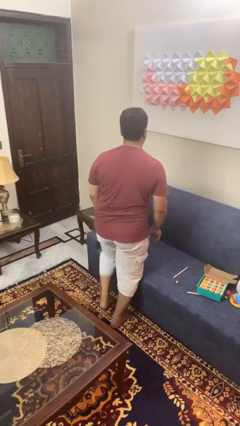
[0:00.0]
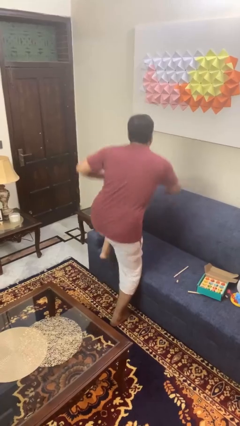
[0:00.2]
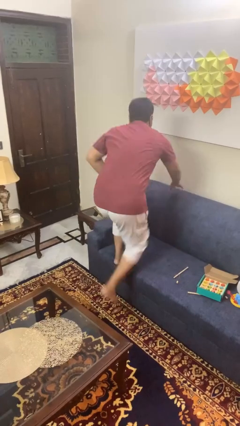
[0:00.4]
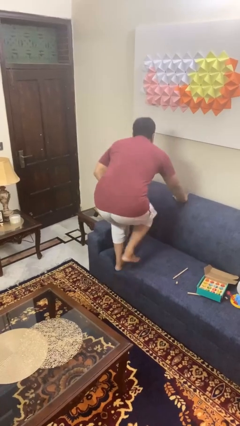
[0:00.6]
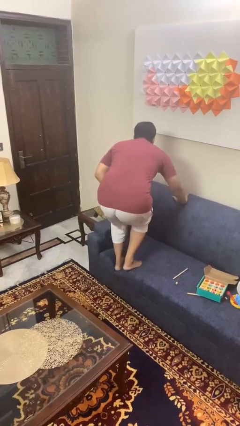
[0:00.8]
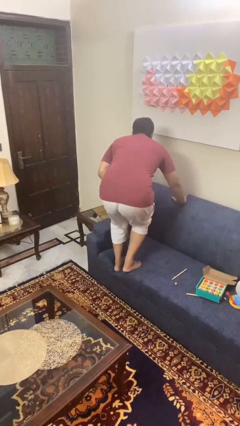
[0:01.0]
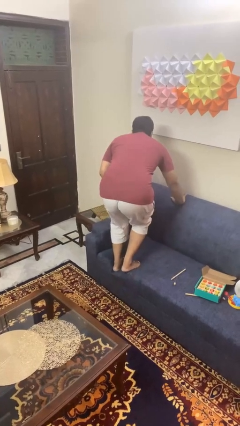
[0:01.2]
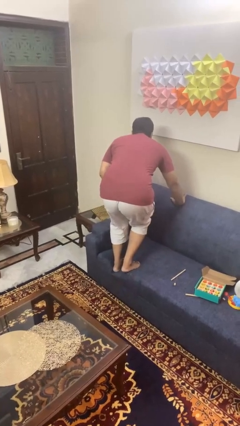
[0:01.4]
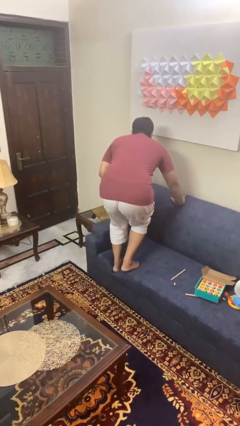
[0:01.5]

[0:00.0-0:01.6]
person jumps on couch

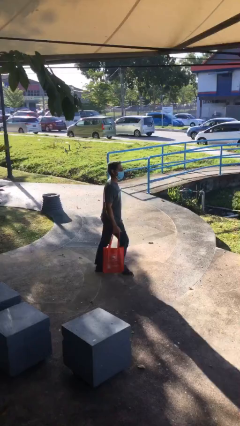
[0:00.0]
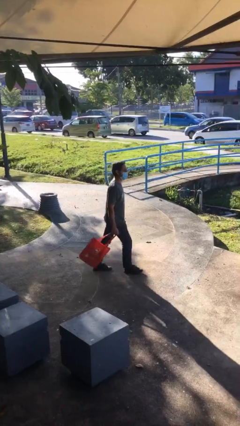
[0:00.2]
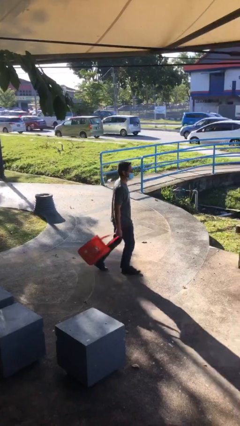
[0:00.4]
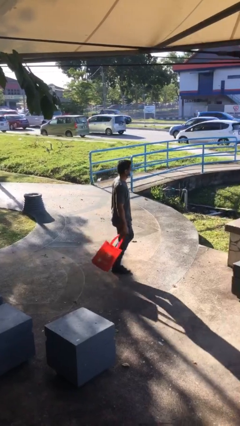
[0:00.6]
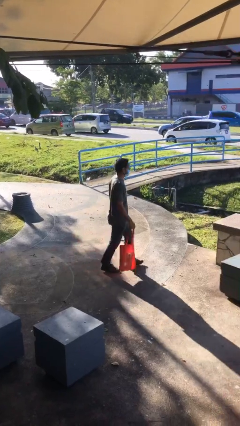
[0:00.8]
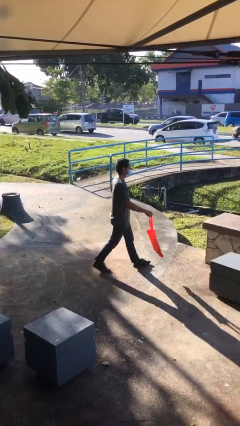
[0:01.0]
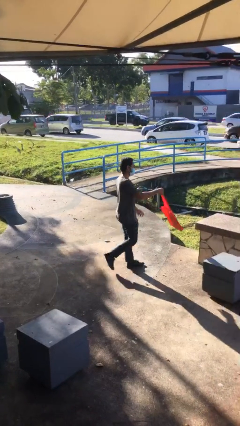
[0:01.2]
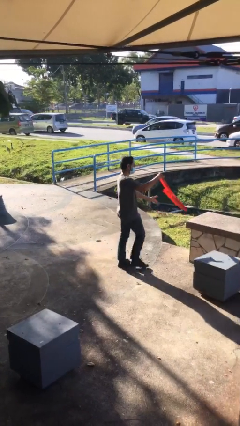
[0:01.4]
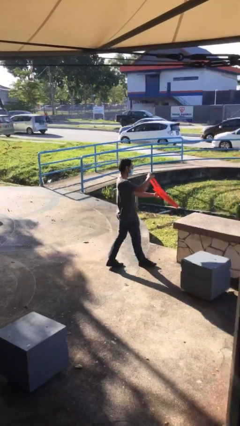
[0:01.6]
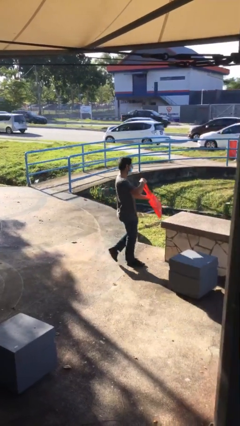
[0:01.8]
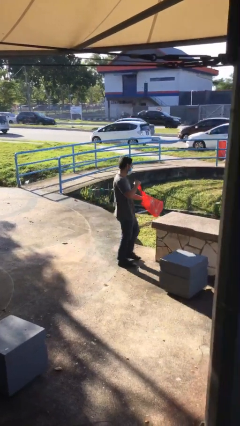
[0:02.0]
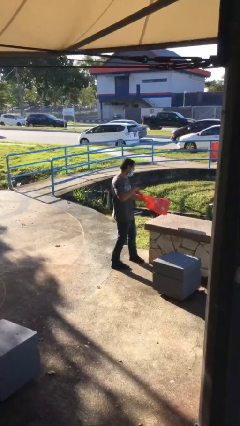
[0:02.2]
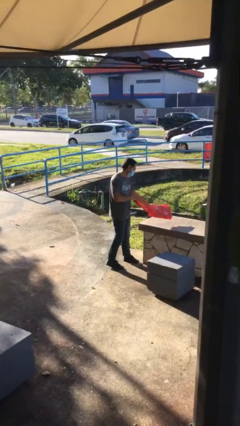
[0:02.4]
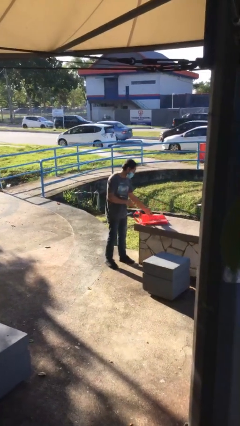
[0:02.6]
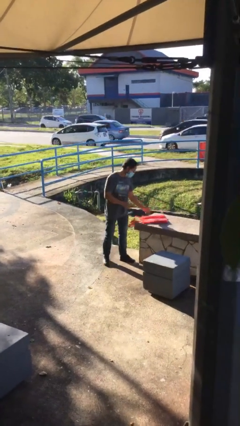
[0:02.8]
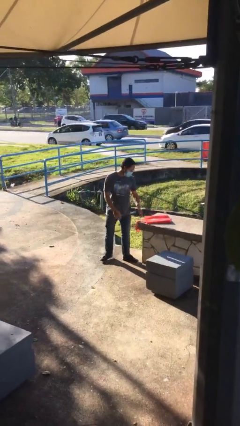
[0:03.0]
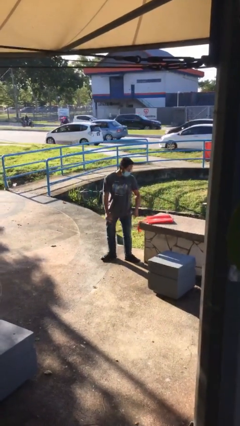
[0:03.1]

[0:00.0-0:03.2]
person puts down object on table

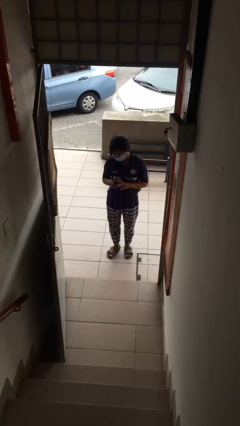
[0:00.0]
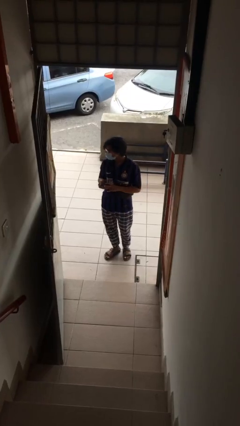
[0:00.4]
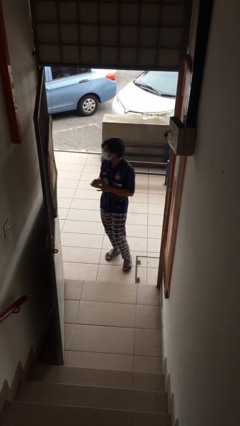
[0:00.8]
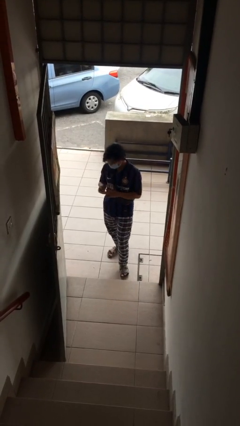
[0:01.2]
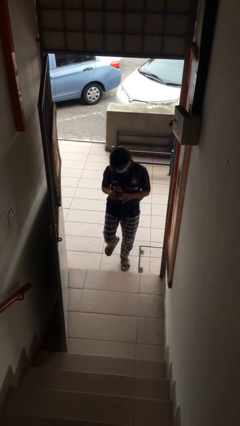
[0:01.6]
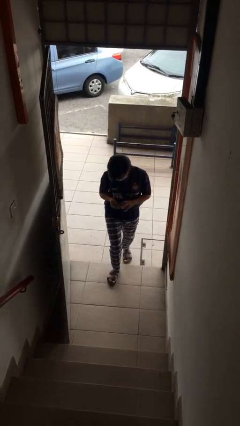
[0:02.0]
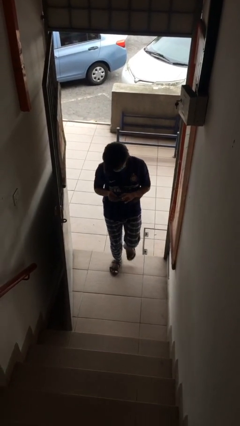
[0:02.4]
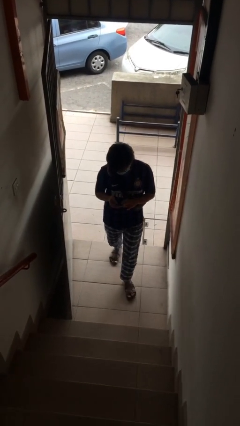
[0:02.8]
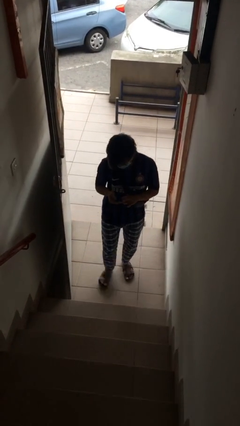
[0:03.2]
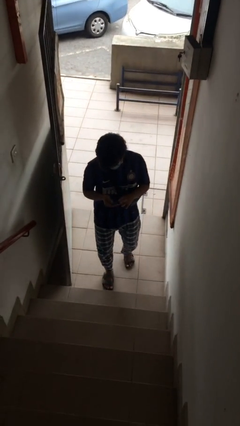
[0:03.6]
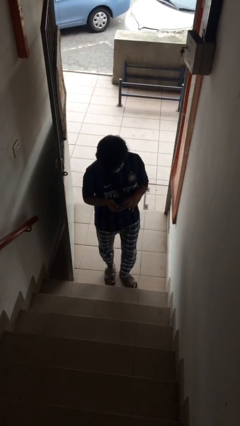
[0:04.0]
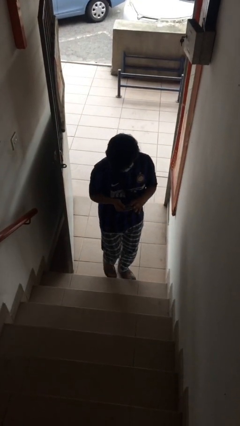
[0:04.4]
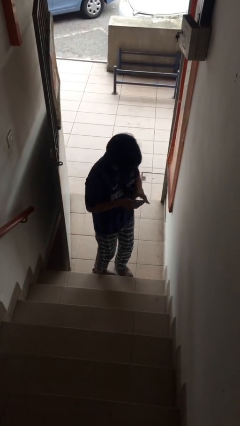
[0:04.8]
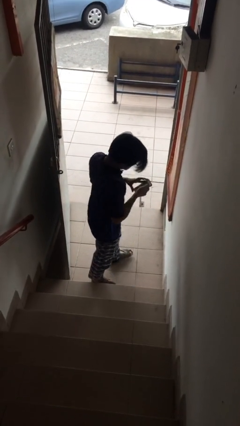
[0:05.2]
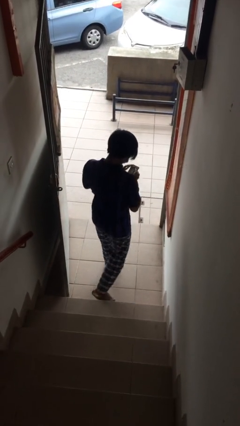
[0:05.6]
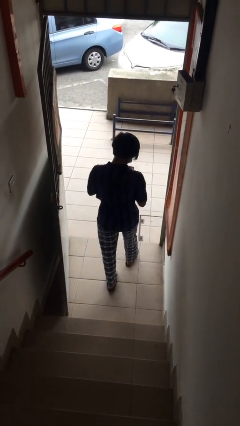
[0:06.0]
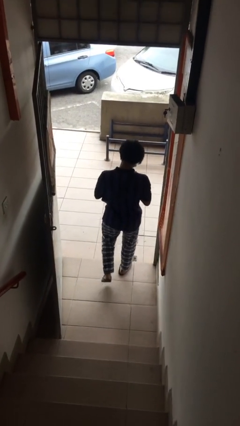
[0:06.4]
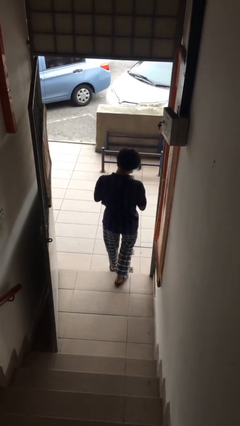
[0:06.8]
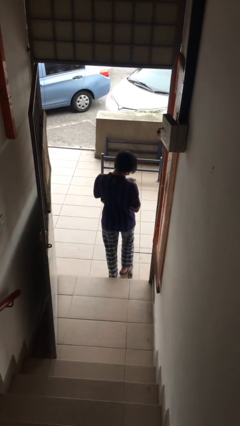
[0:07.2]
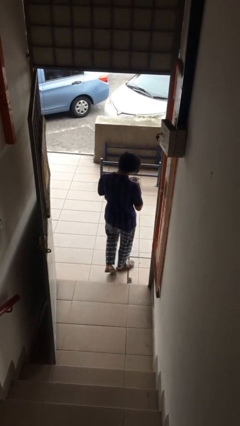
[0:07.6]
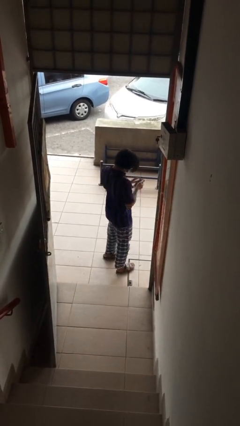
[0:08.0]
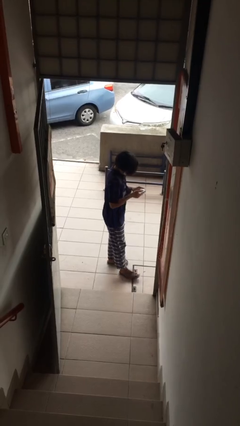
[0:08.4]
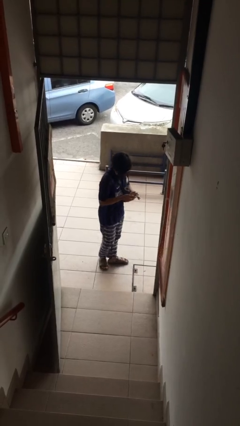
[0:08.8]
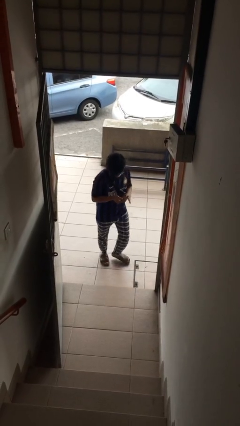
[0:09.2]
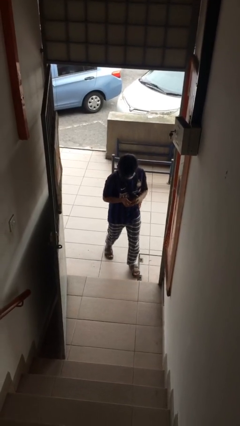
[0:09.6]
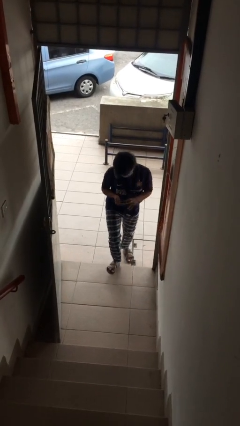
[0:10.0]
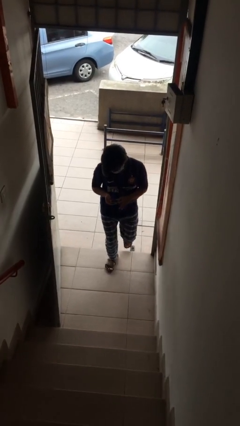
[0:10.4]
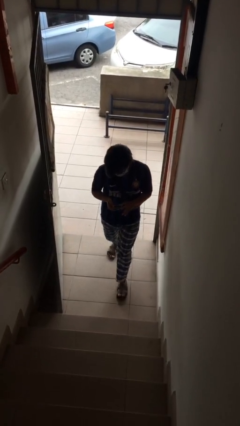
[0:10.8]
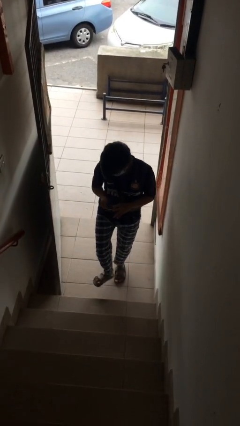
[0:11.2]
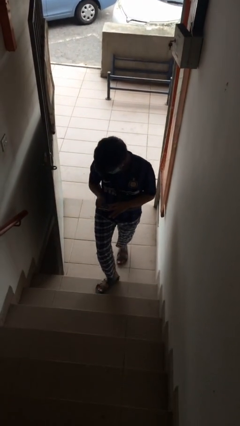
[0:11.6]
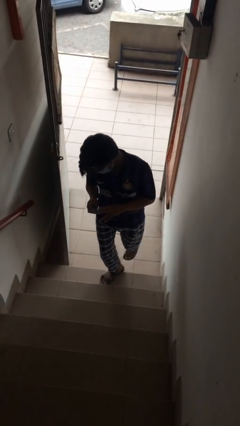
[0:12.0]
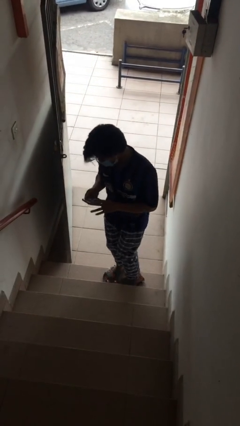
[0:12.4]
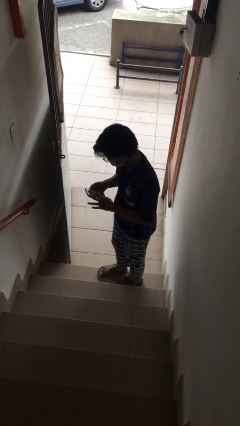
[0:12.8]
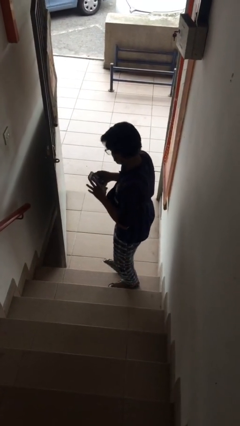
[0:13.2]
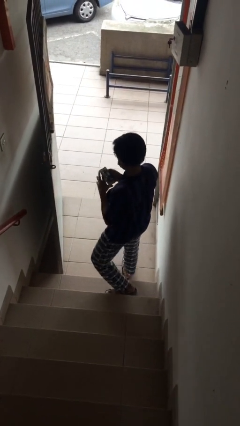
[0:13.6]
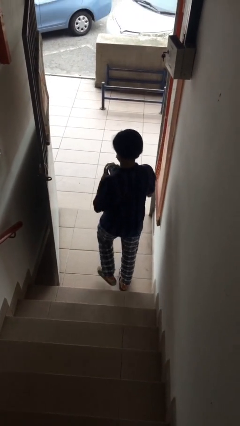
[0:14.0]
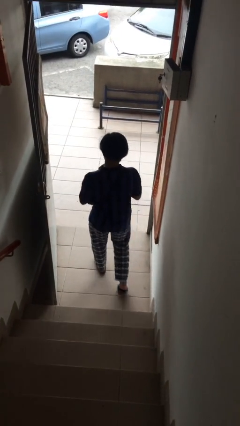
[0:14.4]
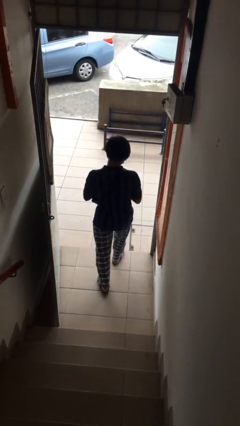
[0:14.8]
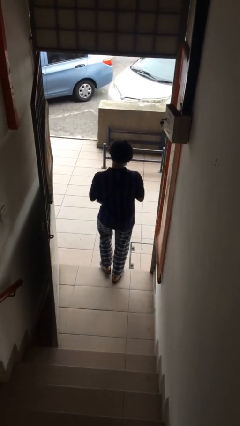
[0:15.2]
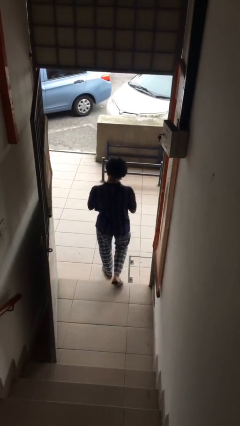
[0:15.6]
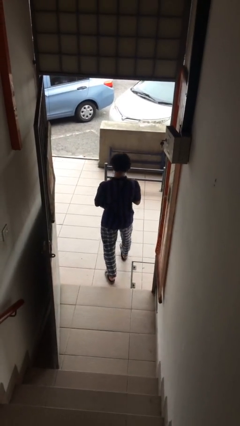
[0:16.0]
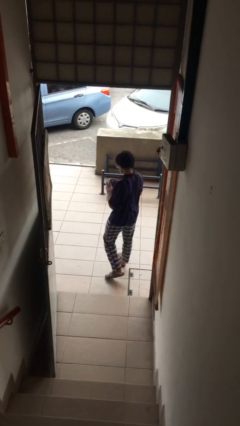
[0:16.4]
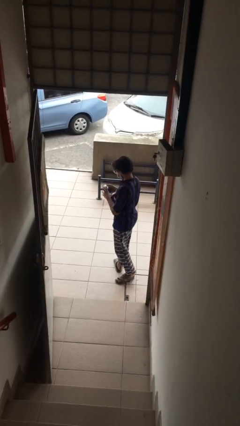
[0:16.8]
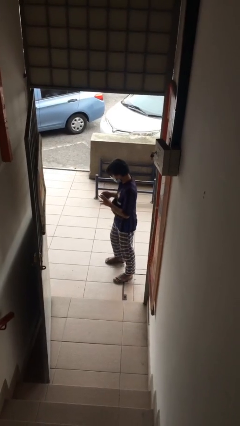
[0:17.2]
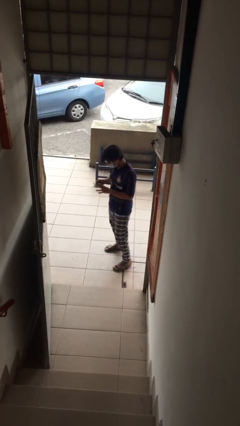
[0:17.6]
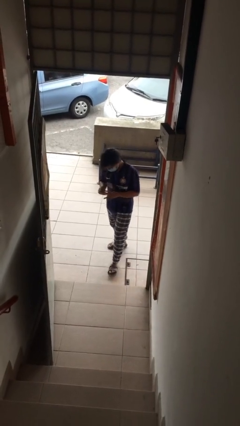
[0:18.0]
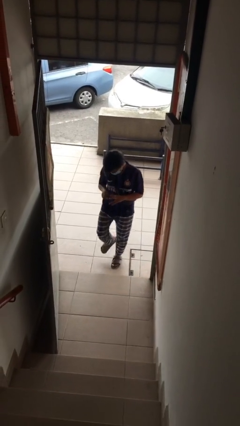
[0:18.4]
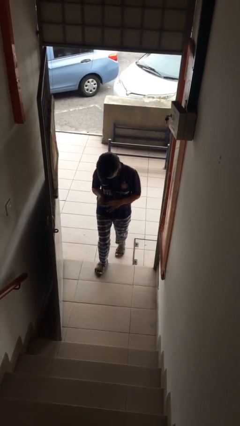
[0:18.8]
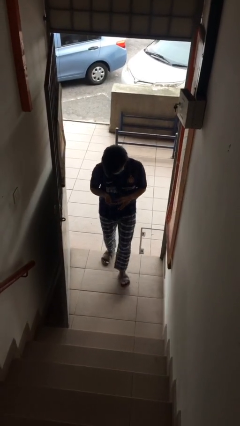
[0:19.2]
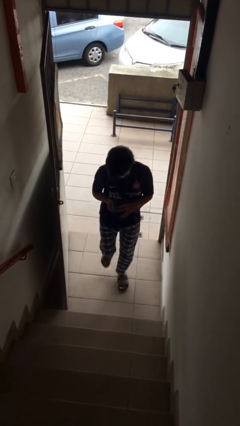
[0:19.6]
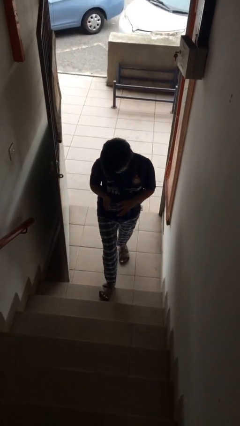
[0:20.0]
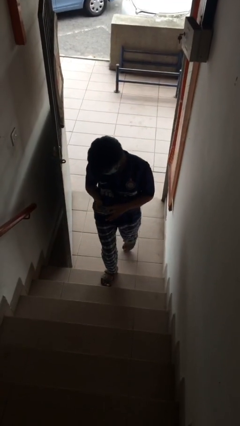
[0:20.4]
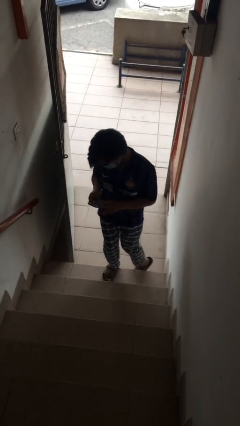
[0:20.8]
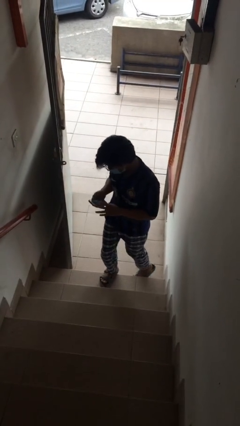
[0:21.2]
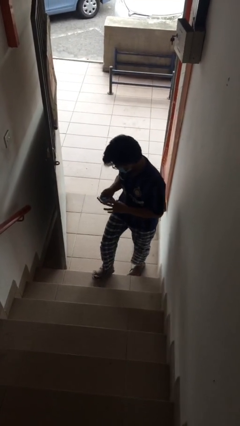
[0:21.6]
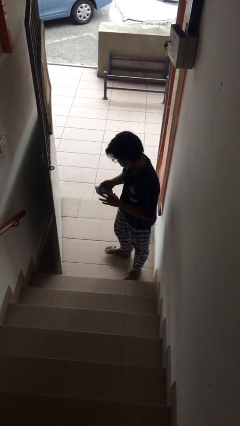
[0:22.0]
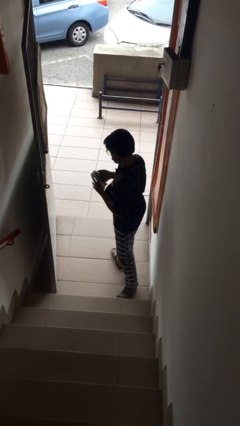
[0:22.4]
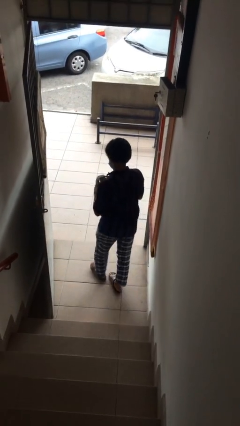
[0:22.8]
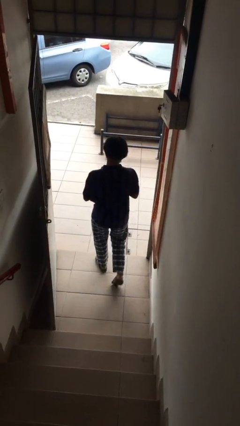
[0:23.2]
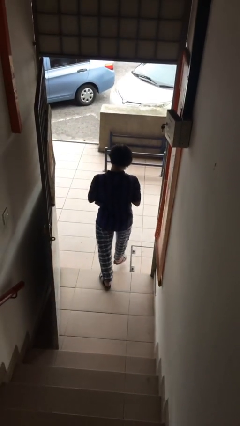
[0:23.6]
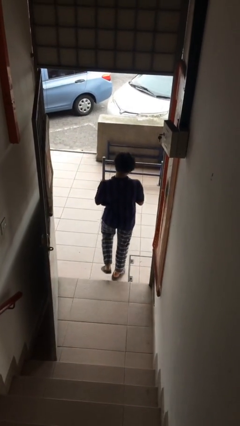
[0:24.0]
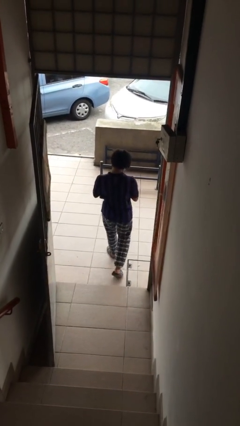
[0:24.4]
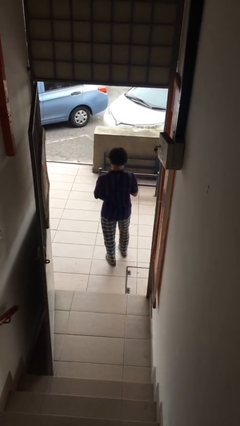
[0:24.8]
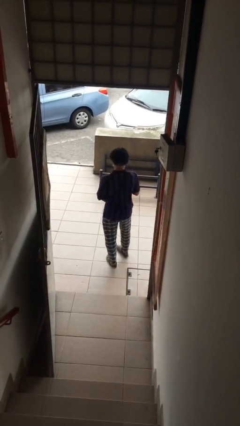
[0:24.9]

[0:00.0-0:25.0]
person texts on phone

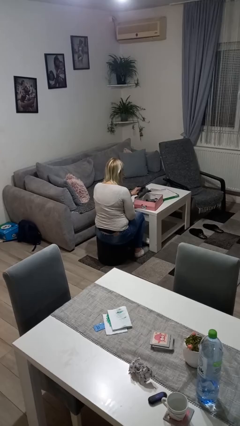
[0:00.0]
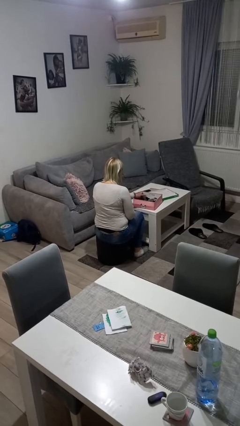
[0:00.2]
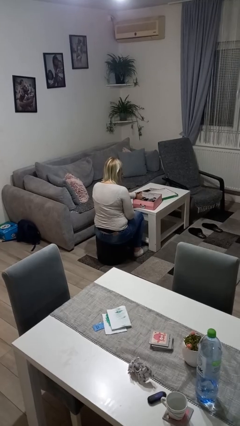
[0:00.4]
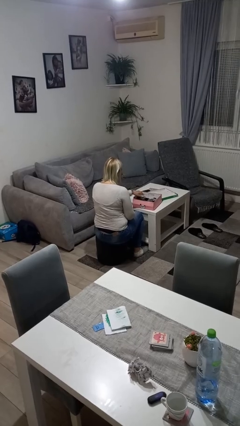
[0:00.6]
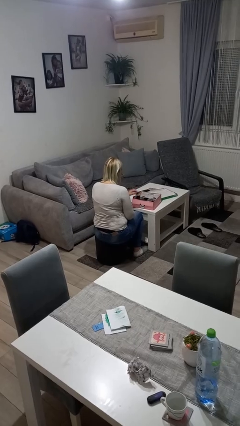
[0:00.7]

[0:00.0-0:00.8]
person puts object into box
